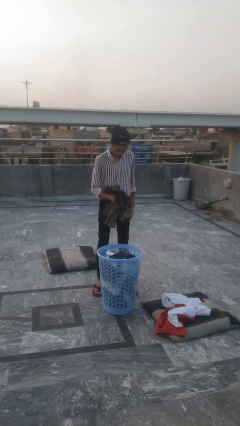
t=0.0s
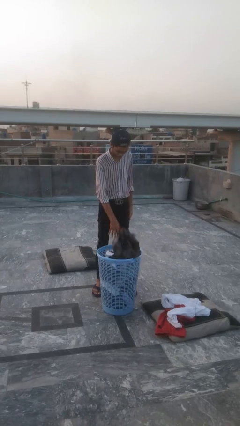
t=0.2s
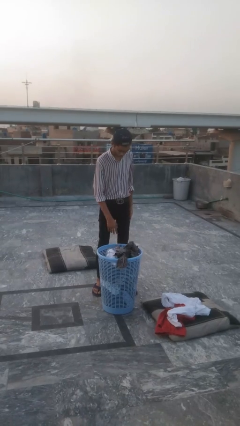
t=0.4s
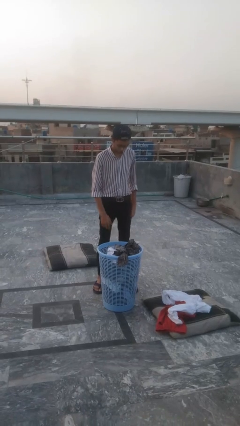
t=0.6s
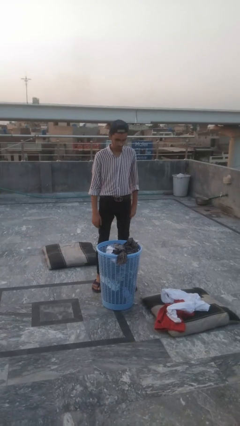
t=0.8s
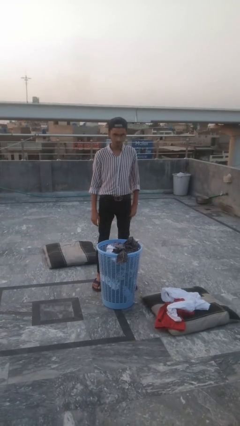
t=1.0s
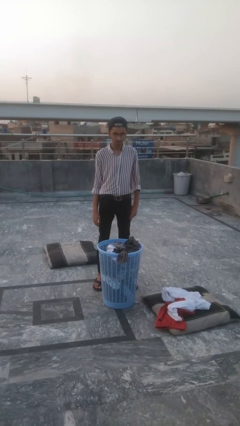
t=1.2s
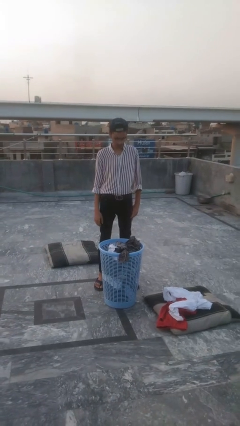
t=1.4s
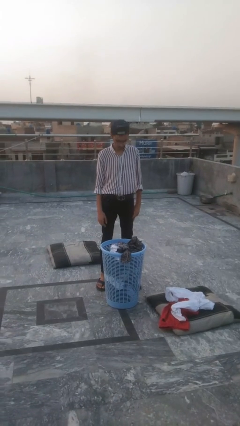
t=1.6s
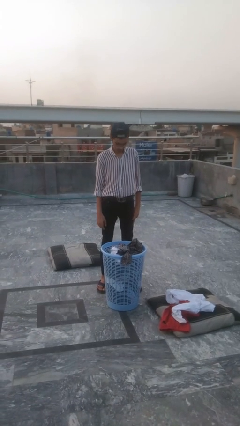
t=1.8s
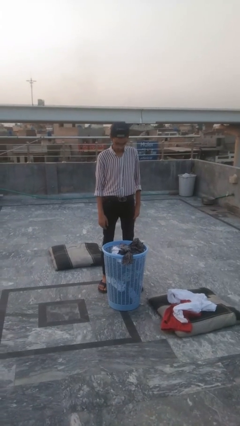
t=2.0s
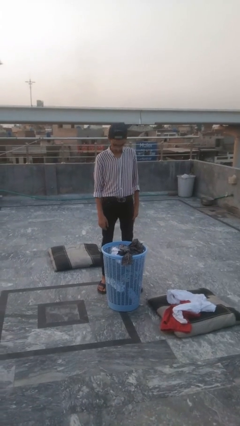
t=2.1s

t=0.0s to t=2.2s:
person puts object into basket

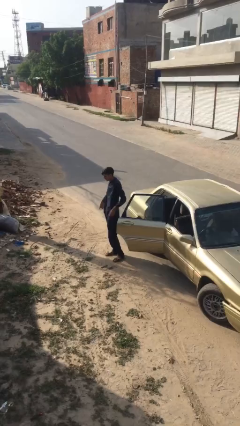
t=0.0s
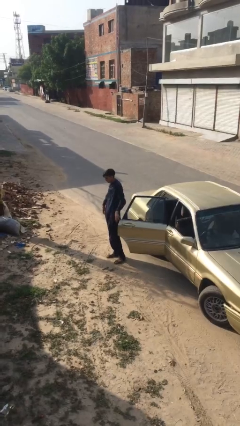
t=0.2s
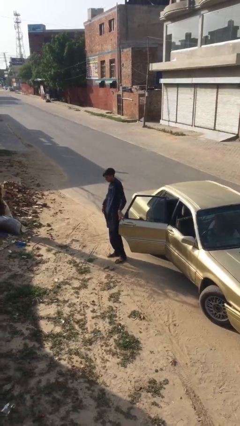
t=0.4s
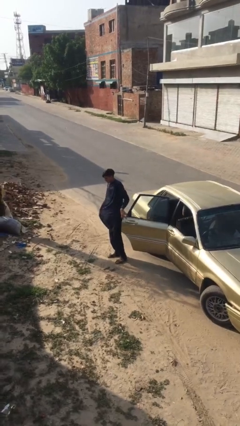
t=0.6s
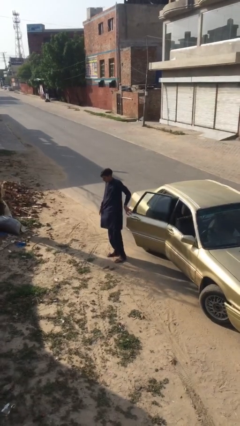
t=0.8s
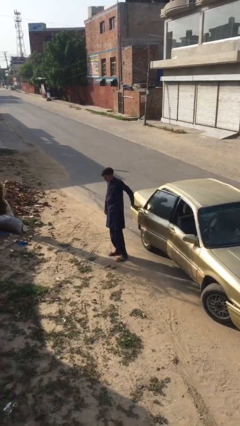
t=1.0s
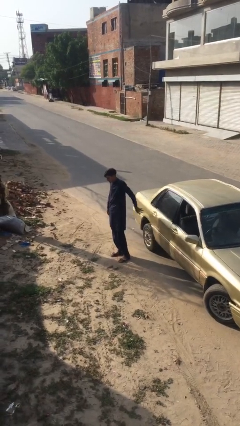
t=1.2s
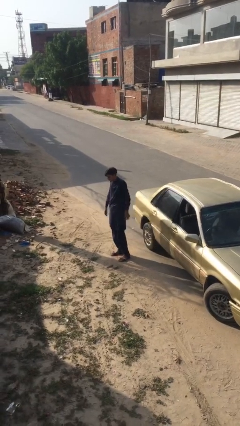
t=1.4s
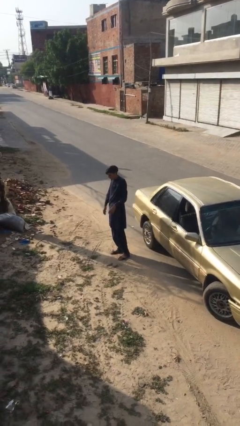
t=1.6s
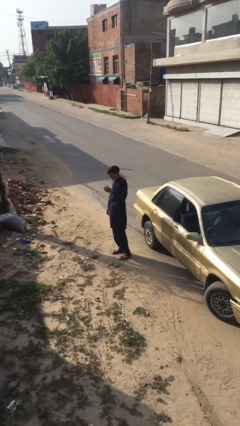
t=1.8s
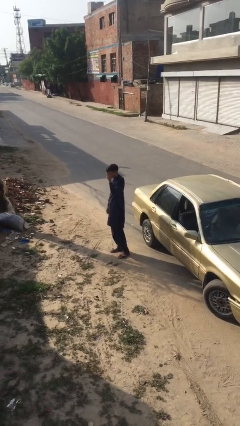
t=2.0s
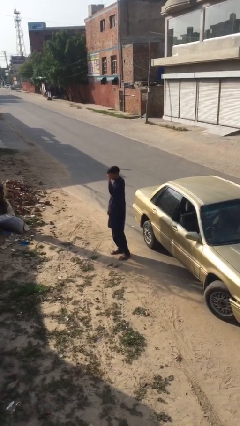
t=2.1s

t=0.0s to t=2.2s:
person closes car door

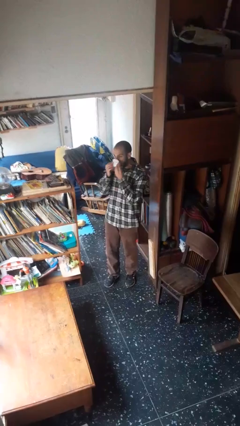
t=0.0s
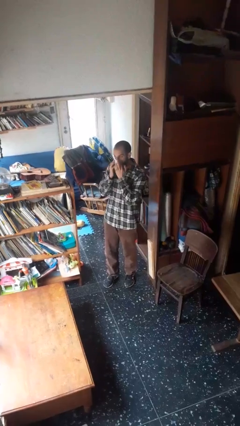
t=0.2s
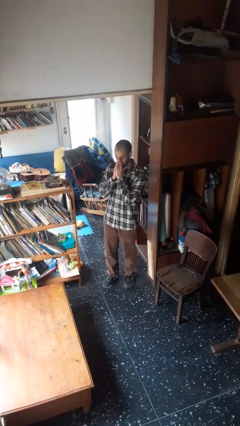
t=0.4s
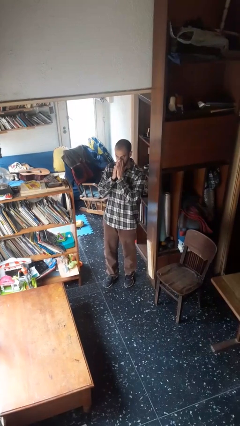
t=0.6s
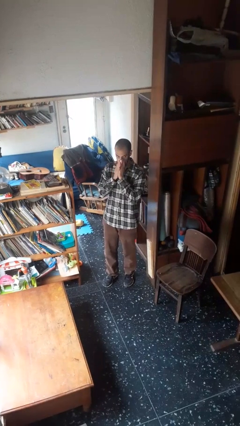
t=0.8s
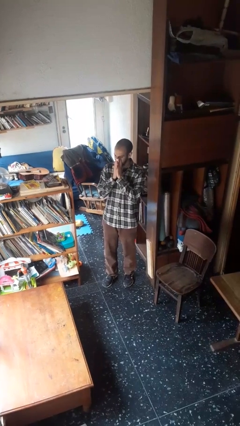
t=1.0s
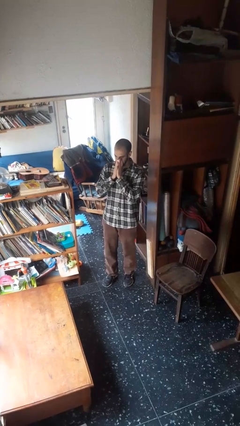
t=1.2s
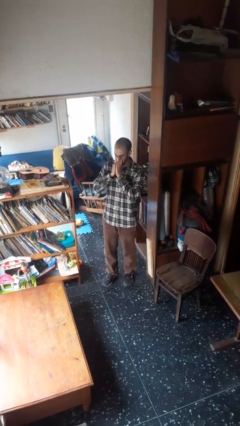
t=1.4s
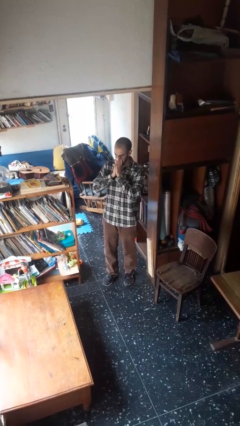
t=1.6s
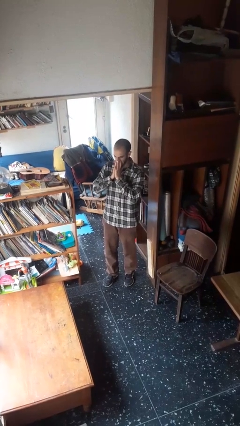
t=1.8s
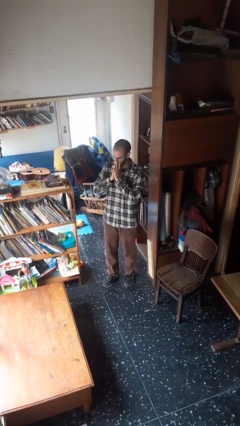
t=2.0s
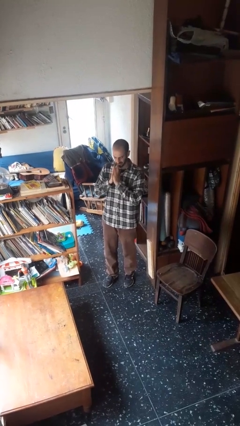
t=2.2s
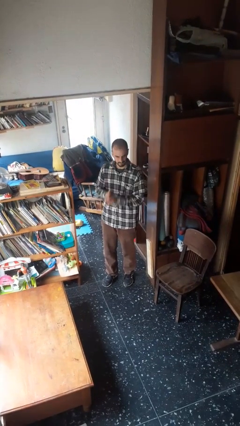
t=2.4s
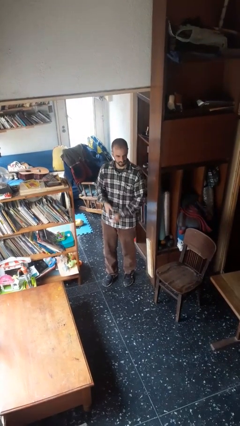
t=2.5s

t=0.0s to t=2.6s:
person blows nose

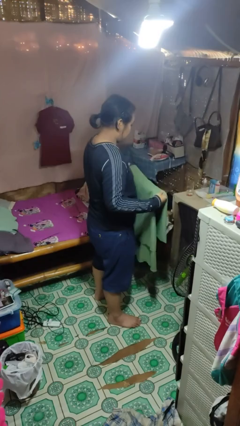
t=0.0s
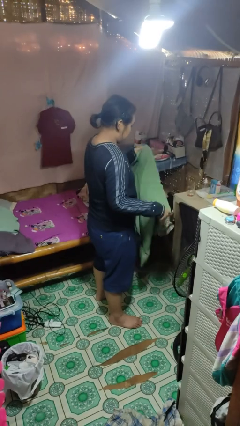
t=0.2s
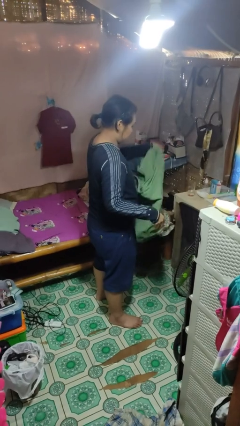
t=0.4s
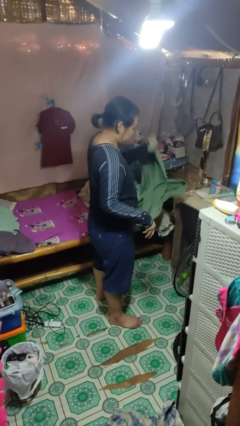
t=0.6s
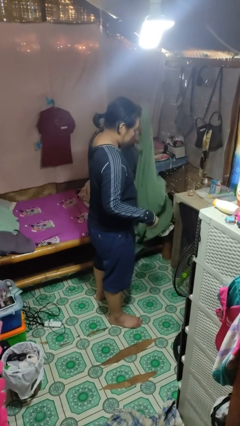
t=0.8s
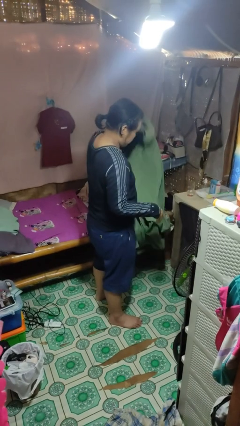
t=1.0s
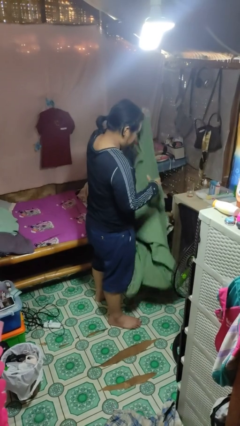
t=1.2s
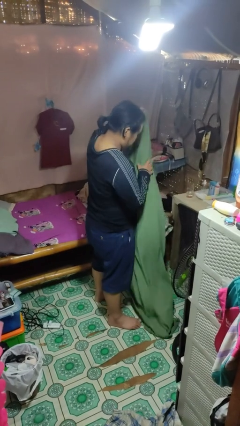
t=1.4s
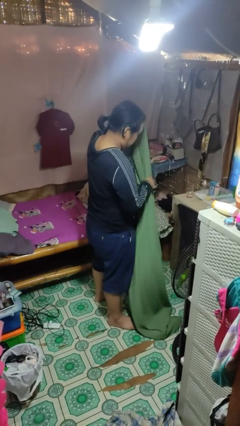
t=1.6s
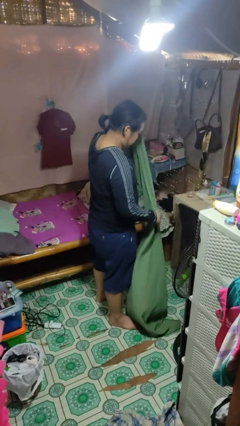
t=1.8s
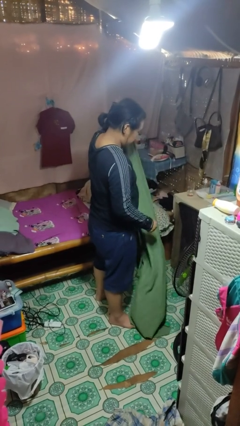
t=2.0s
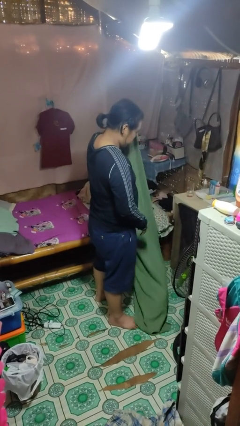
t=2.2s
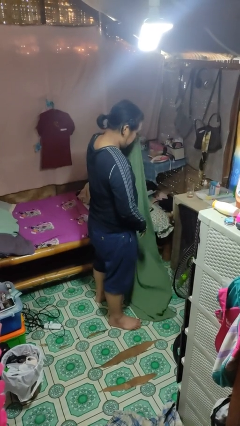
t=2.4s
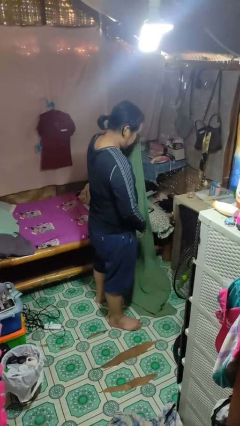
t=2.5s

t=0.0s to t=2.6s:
person unfolds blanket

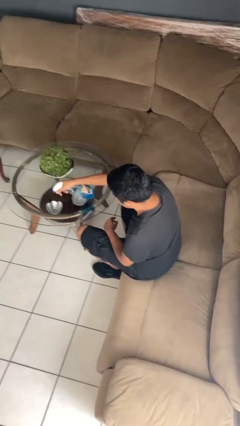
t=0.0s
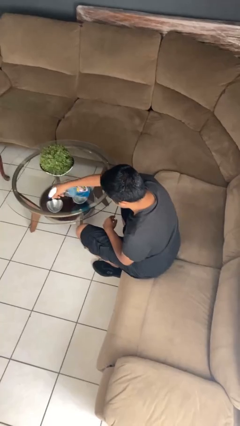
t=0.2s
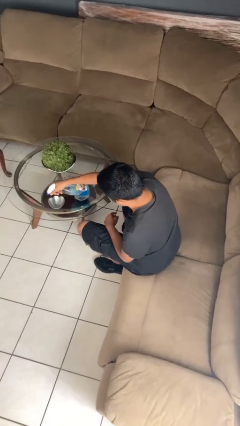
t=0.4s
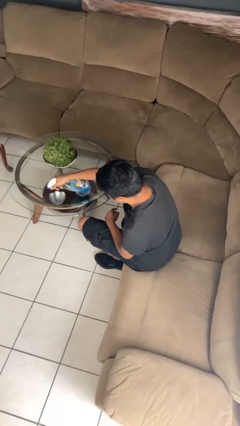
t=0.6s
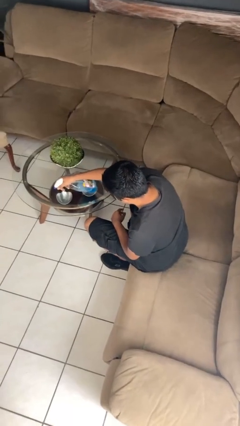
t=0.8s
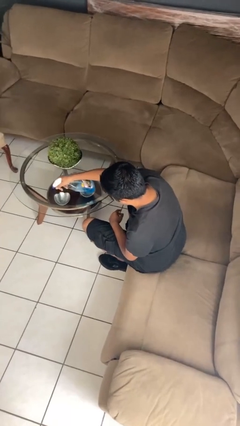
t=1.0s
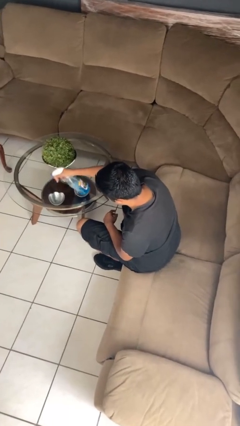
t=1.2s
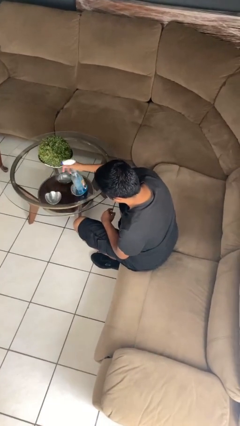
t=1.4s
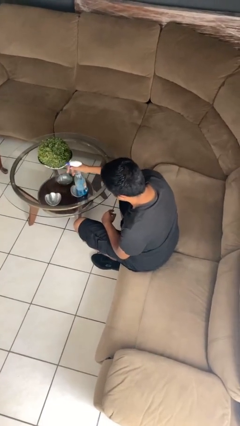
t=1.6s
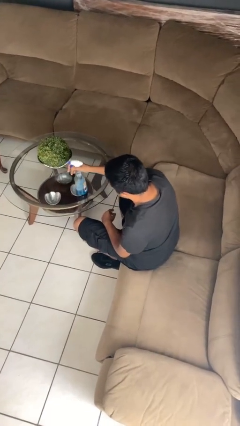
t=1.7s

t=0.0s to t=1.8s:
person sprays from bottle

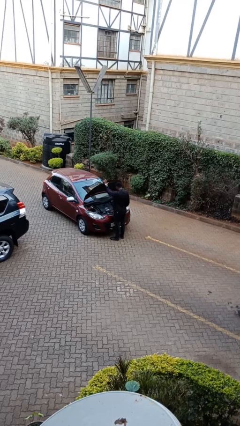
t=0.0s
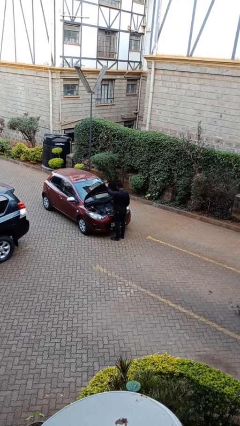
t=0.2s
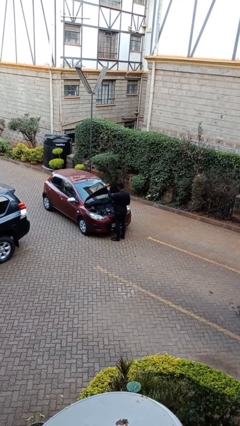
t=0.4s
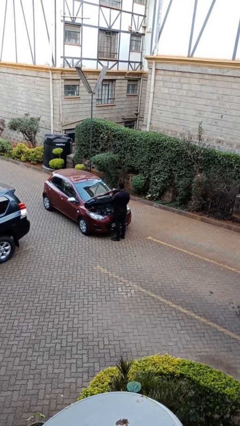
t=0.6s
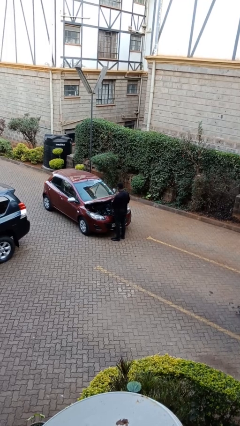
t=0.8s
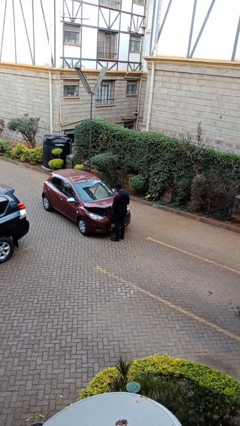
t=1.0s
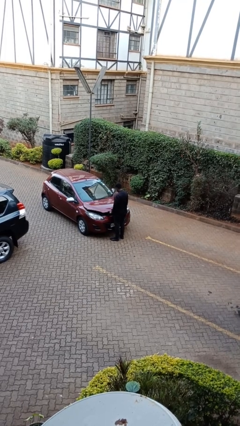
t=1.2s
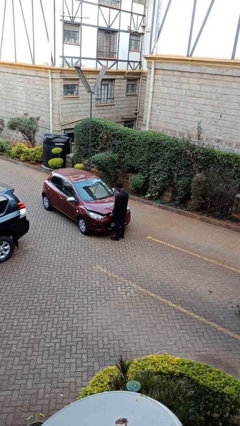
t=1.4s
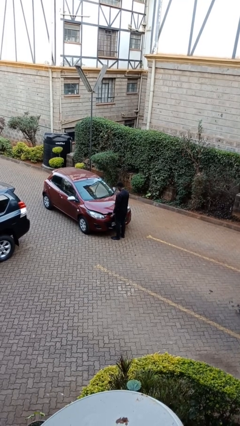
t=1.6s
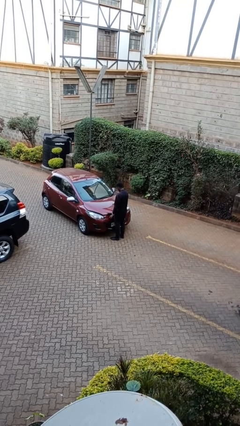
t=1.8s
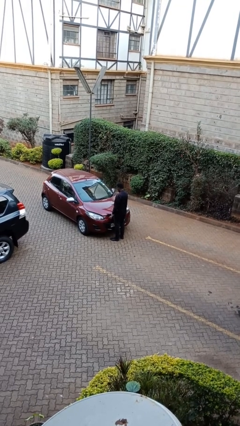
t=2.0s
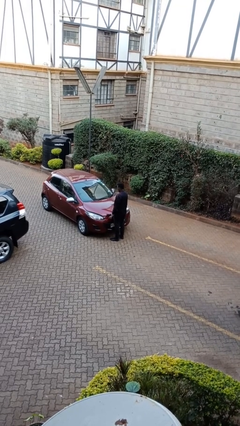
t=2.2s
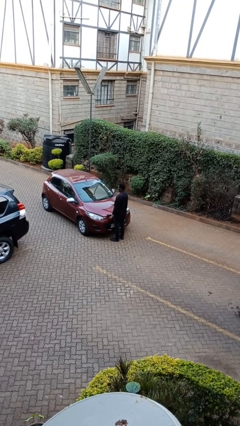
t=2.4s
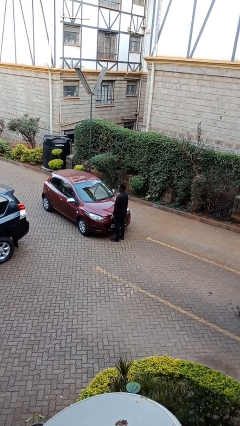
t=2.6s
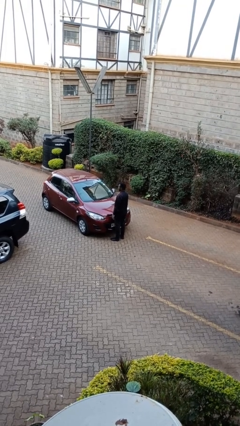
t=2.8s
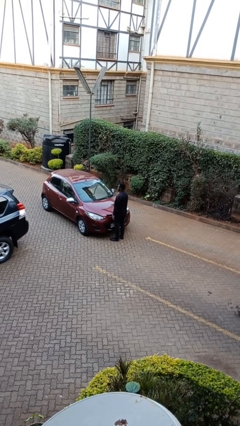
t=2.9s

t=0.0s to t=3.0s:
person closes car hood

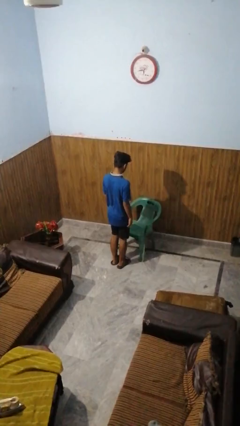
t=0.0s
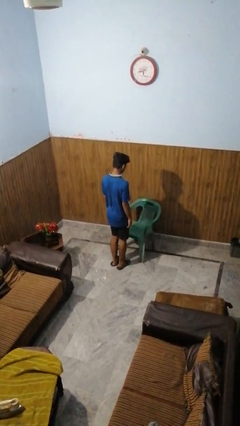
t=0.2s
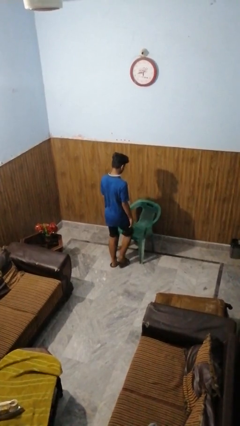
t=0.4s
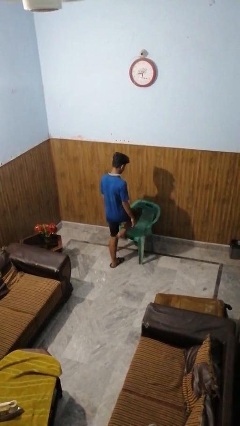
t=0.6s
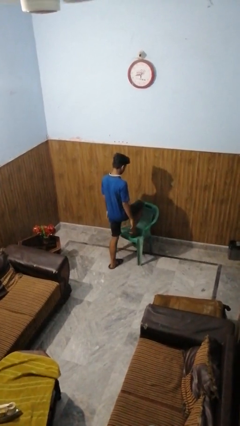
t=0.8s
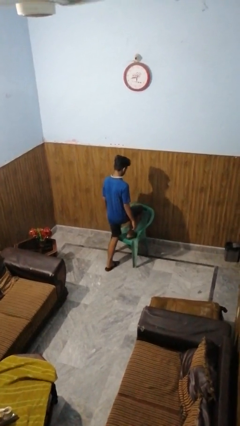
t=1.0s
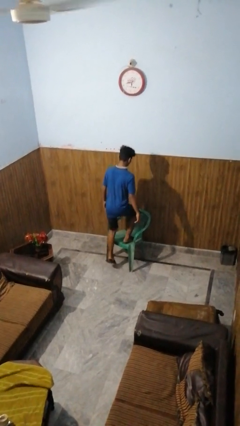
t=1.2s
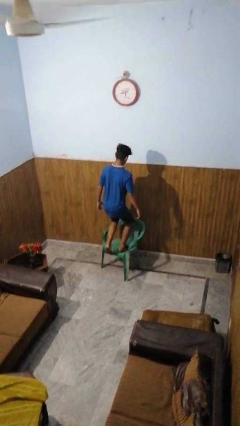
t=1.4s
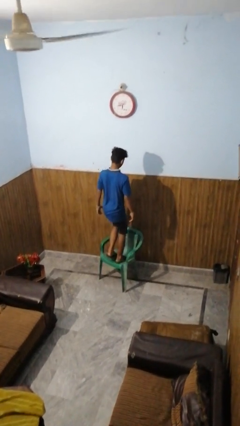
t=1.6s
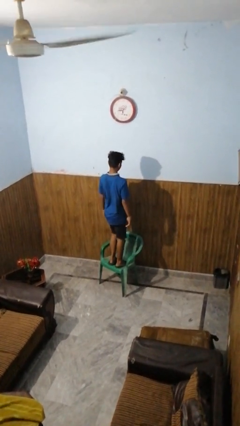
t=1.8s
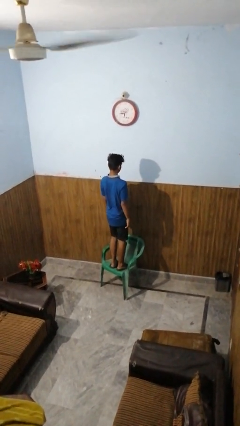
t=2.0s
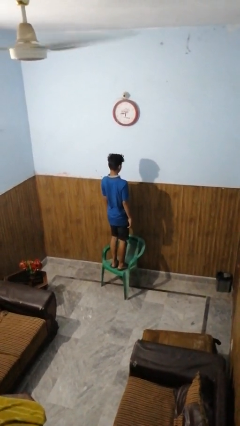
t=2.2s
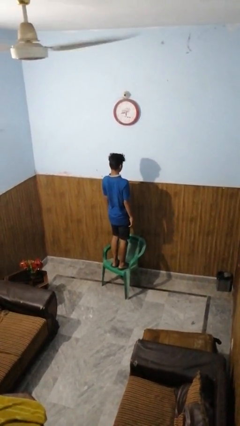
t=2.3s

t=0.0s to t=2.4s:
person climbs on chair

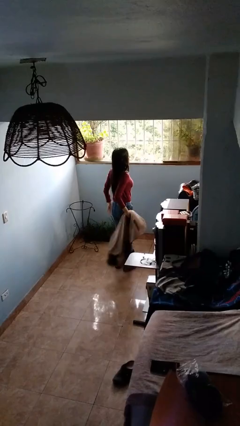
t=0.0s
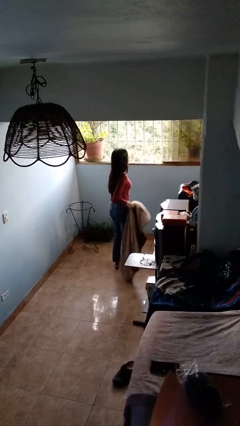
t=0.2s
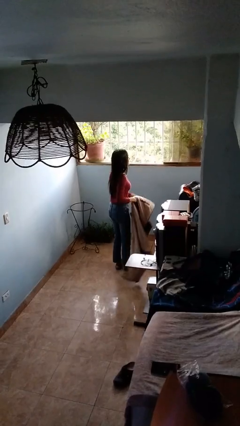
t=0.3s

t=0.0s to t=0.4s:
person takes off jacket
